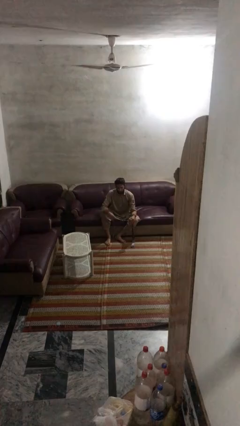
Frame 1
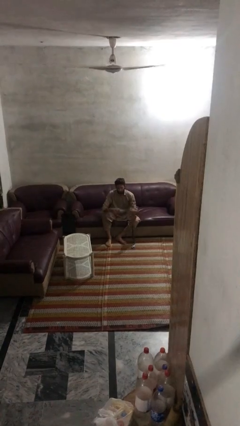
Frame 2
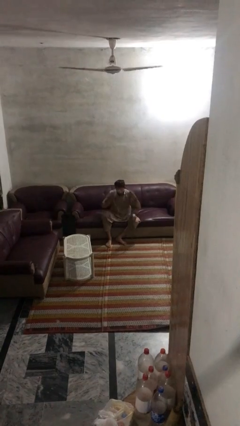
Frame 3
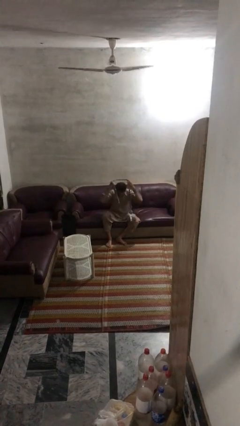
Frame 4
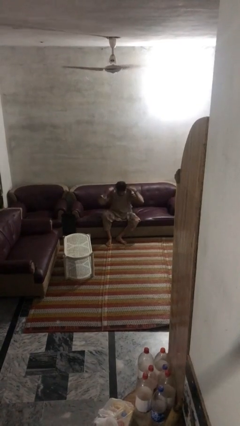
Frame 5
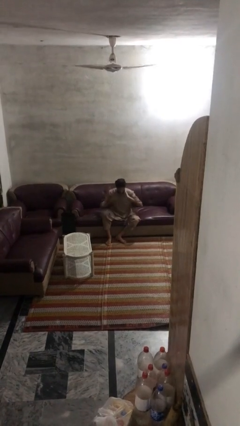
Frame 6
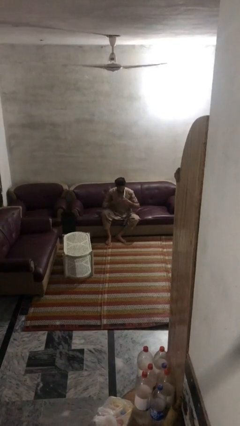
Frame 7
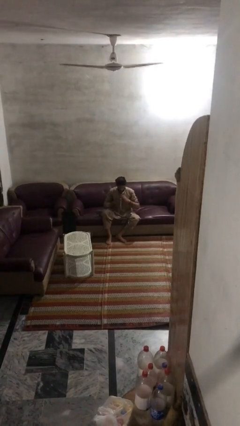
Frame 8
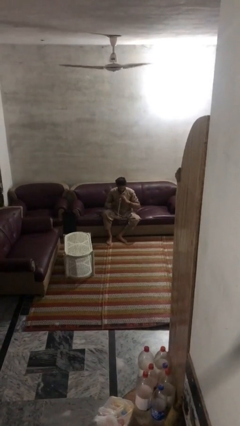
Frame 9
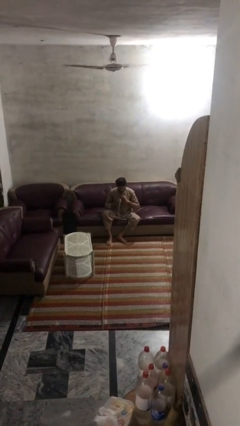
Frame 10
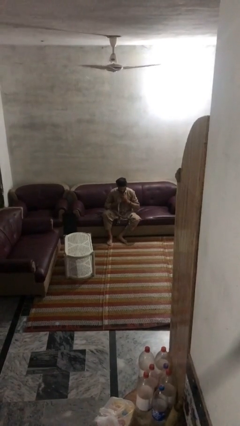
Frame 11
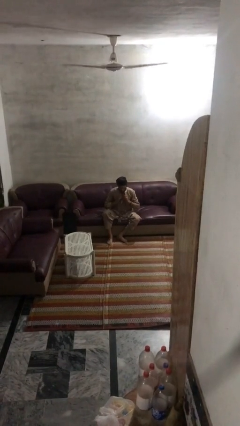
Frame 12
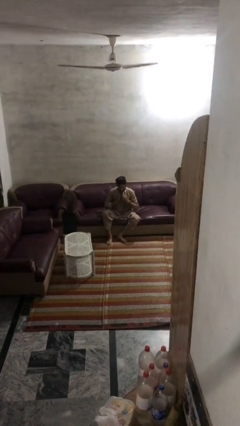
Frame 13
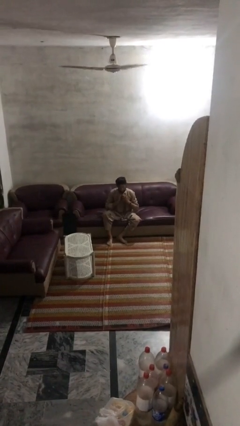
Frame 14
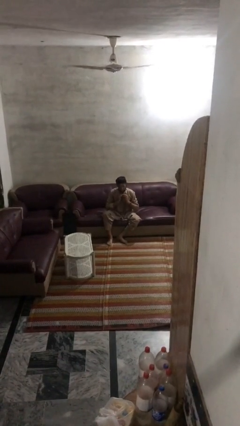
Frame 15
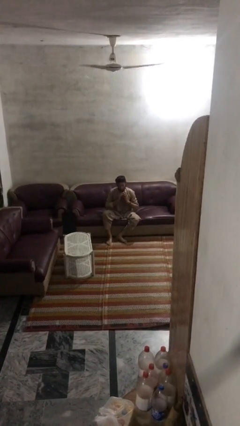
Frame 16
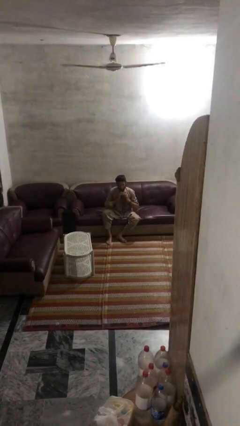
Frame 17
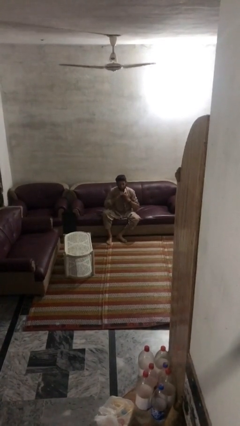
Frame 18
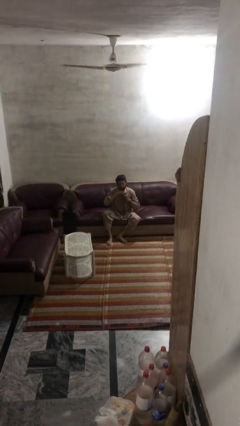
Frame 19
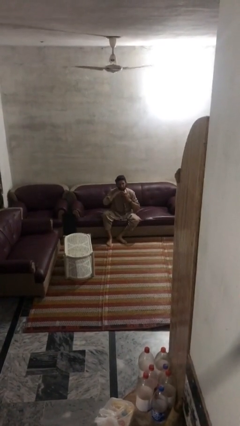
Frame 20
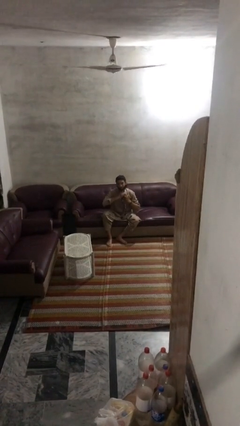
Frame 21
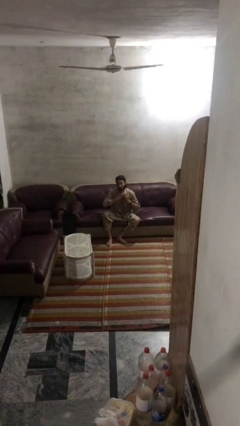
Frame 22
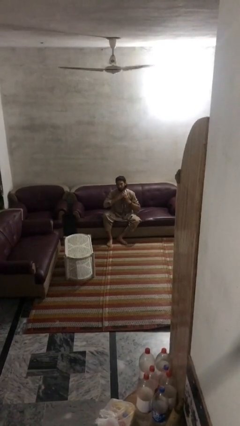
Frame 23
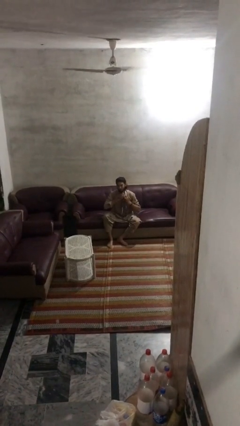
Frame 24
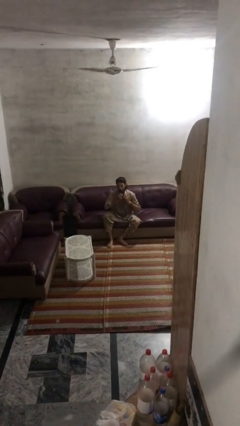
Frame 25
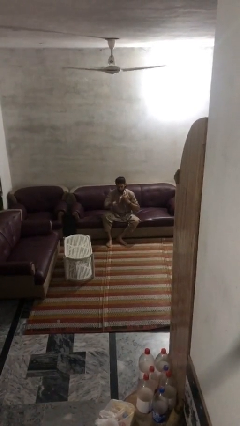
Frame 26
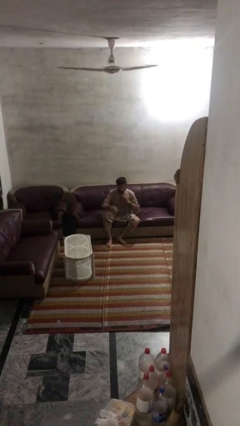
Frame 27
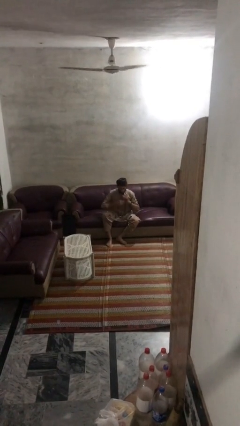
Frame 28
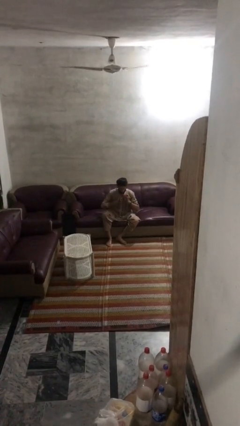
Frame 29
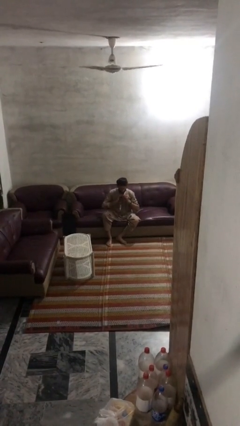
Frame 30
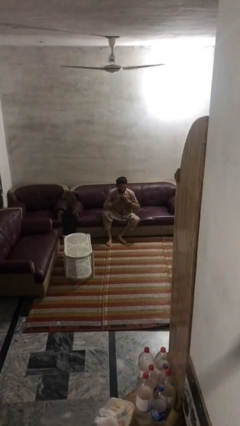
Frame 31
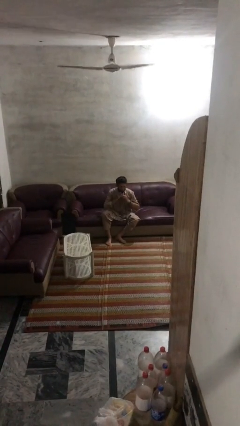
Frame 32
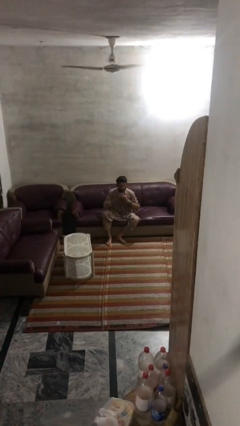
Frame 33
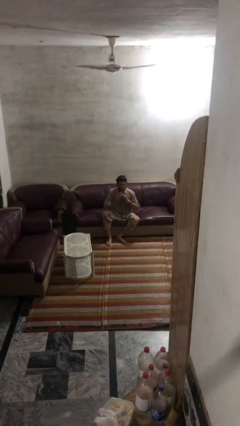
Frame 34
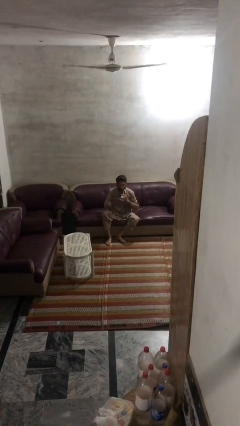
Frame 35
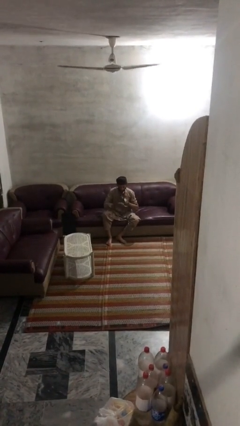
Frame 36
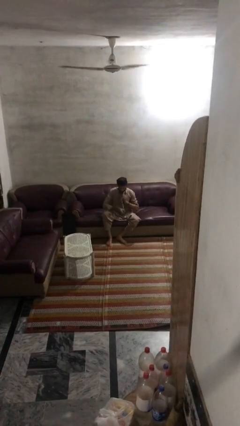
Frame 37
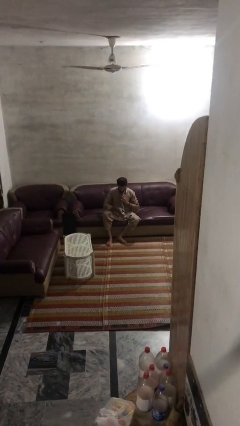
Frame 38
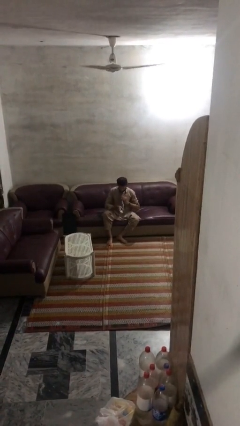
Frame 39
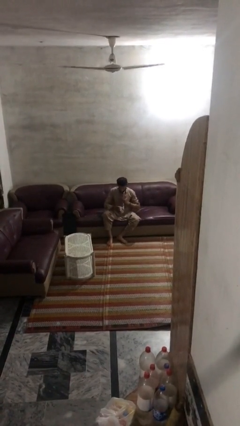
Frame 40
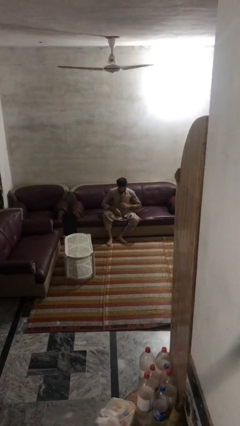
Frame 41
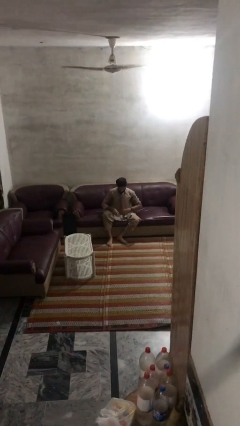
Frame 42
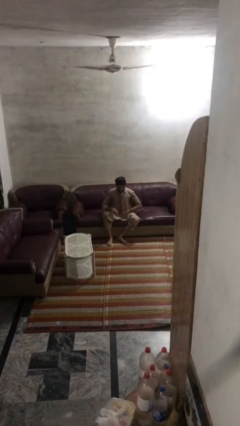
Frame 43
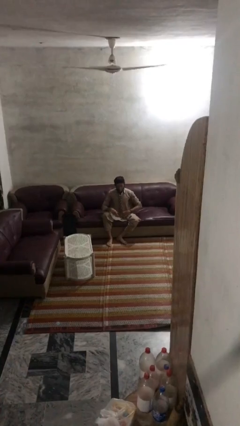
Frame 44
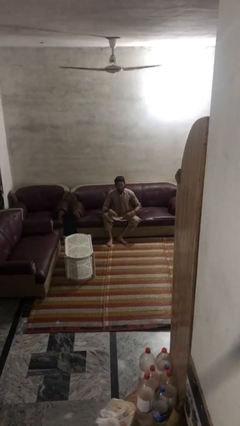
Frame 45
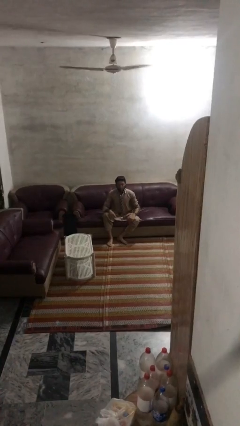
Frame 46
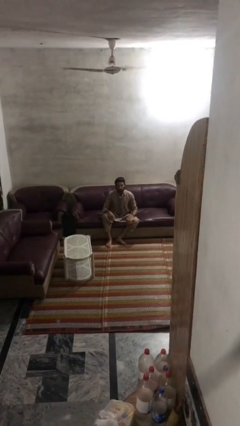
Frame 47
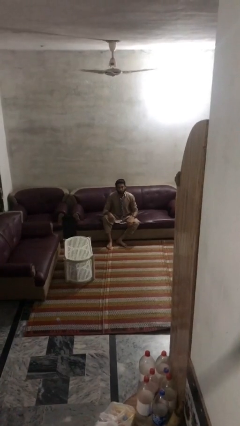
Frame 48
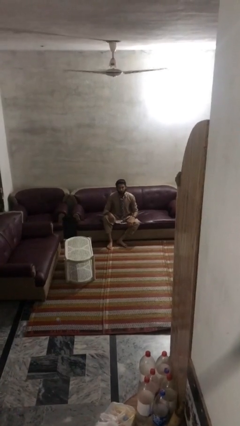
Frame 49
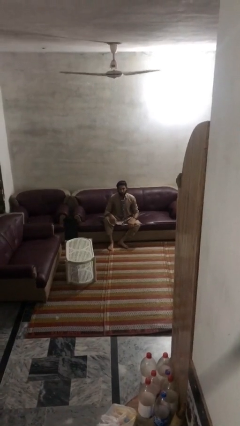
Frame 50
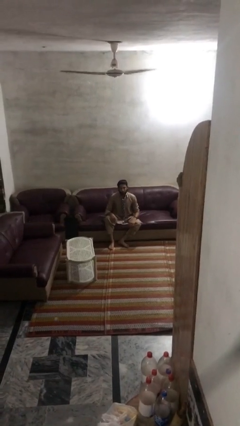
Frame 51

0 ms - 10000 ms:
person puts on necktie

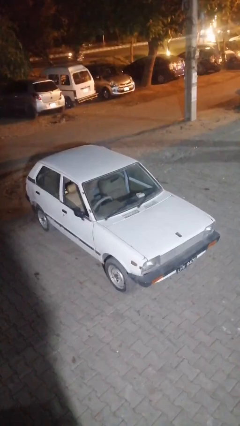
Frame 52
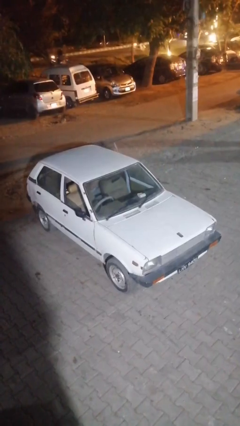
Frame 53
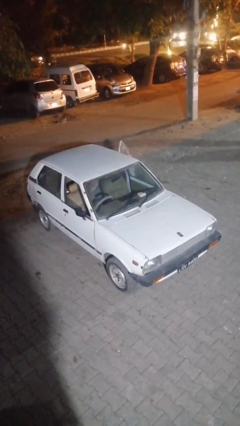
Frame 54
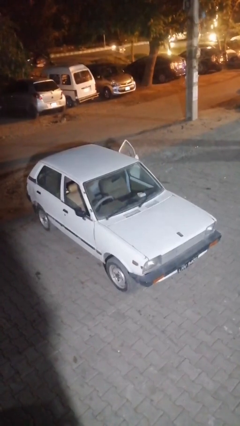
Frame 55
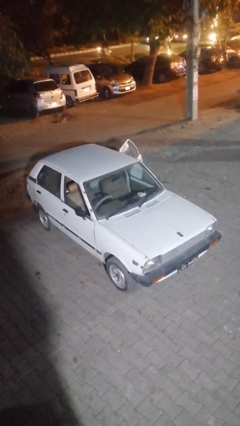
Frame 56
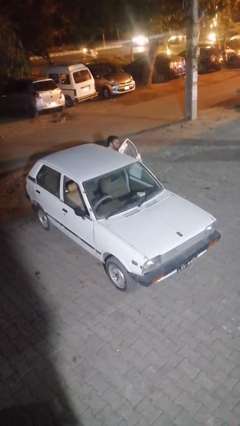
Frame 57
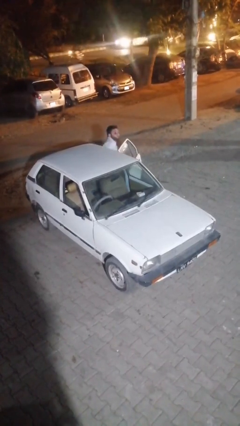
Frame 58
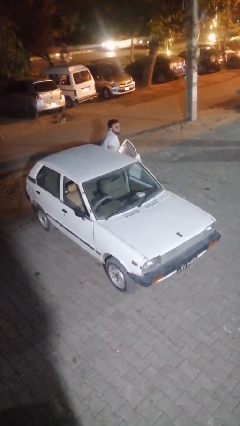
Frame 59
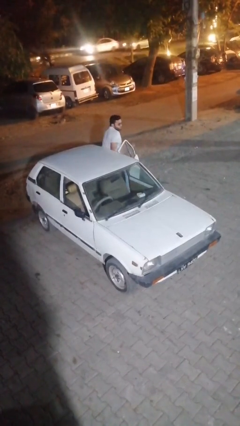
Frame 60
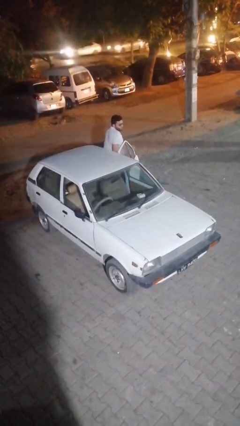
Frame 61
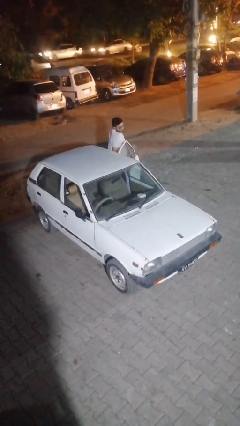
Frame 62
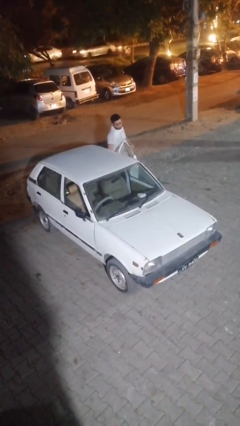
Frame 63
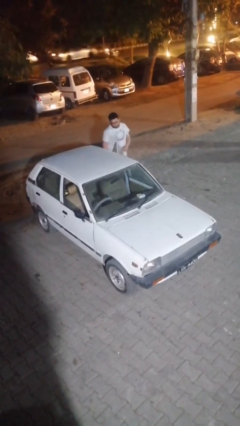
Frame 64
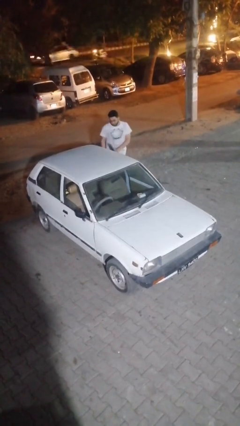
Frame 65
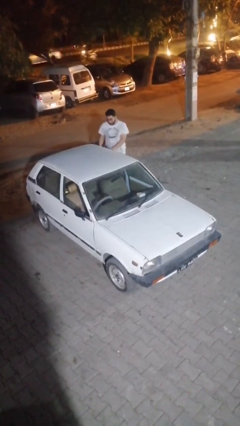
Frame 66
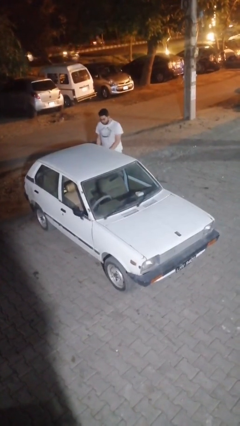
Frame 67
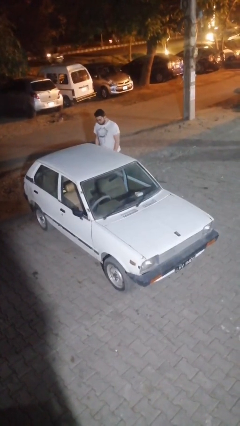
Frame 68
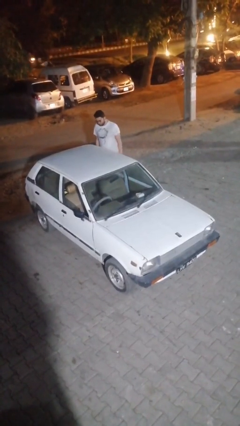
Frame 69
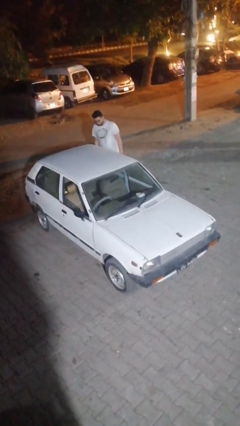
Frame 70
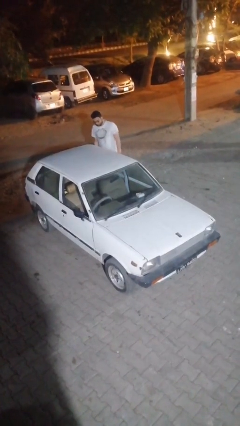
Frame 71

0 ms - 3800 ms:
car drops off person

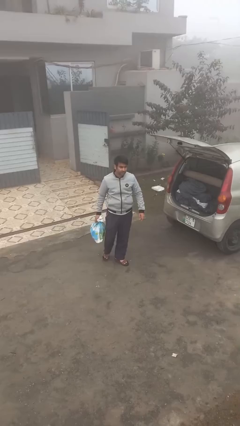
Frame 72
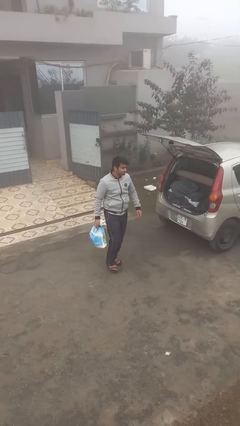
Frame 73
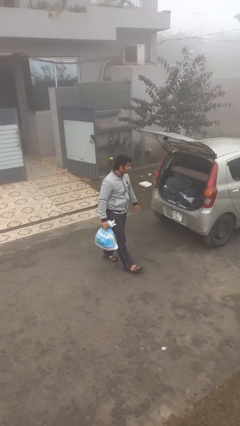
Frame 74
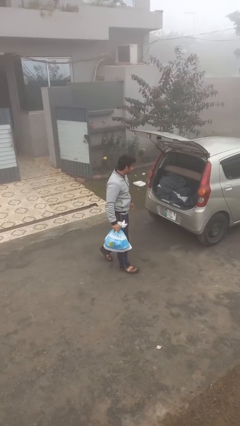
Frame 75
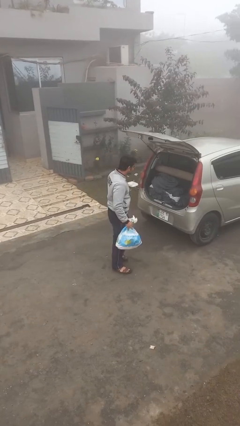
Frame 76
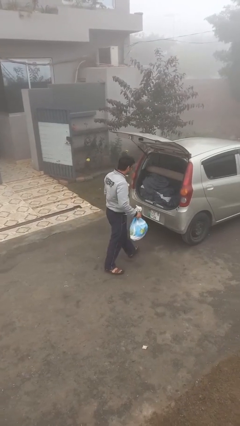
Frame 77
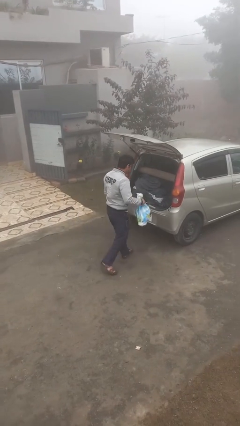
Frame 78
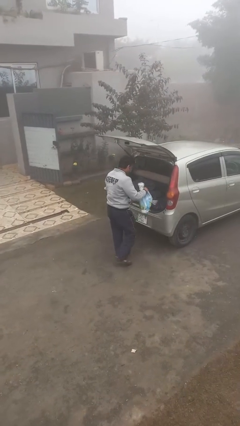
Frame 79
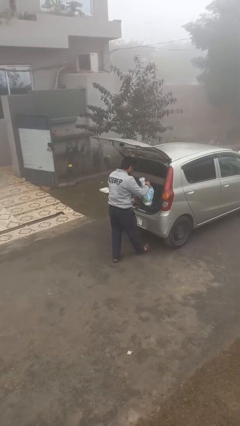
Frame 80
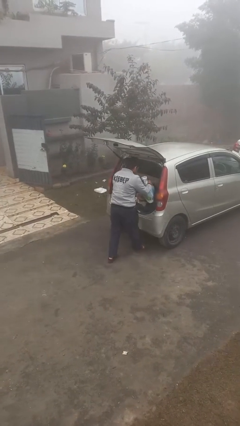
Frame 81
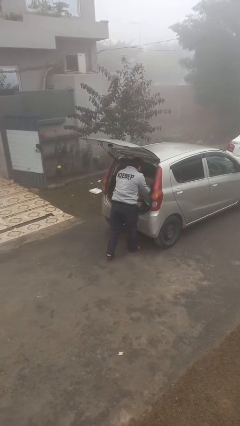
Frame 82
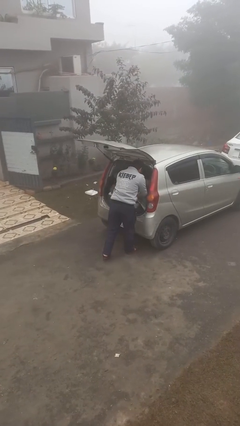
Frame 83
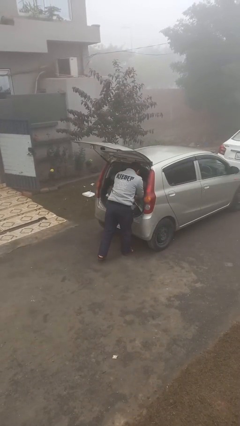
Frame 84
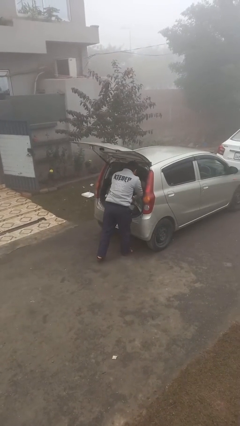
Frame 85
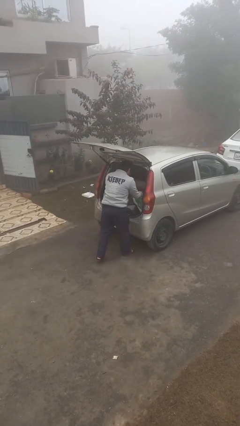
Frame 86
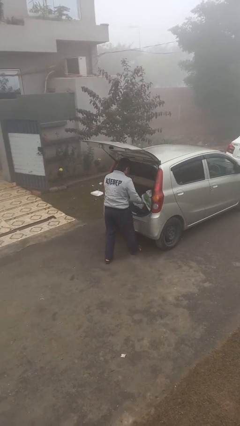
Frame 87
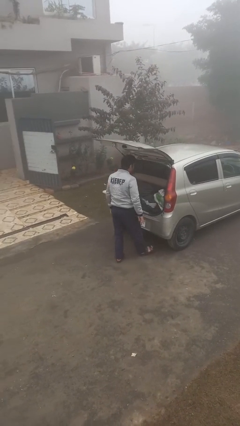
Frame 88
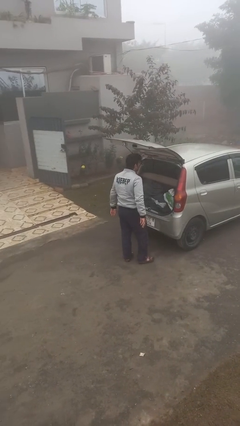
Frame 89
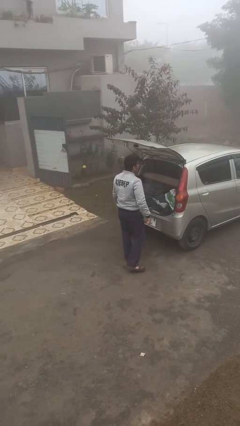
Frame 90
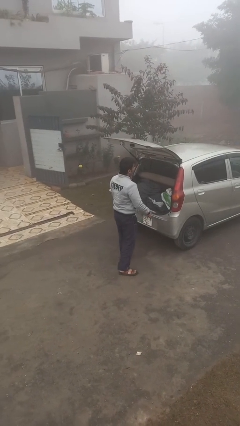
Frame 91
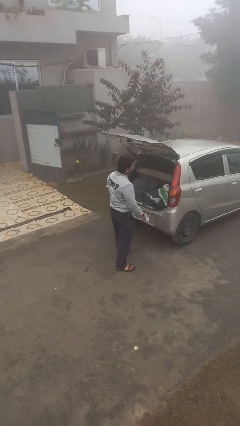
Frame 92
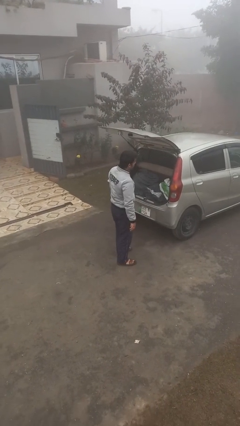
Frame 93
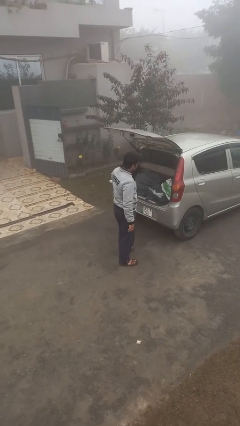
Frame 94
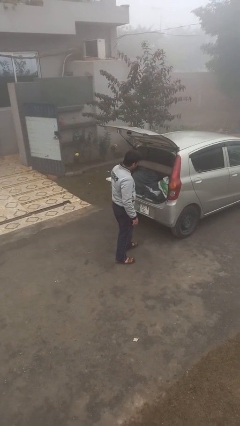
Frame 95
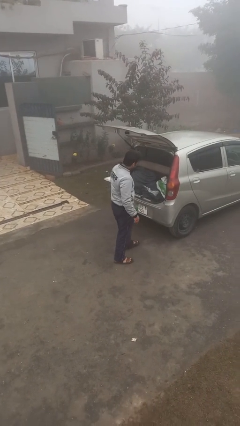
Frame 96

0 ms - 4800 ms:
person loads car
